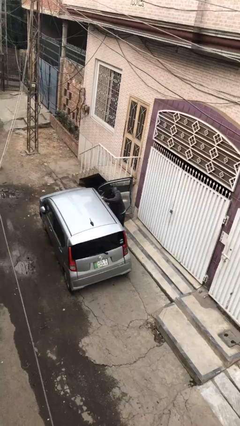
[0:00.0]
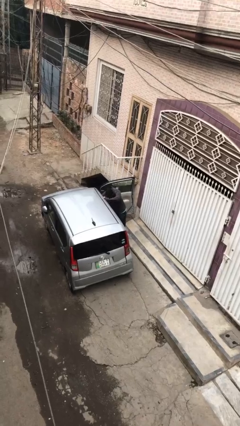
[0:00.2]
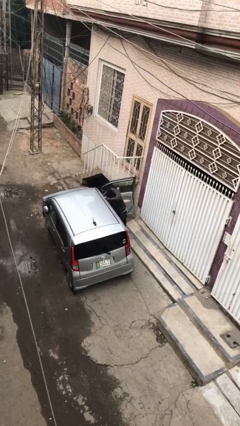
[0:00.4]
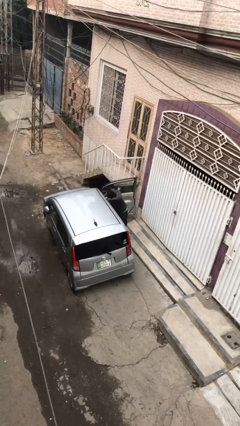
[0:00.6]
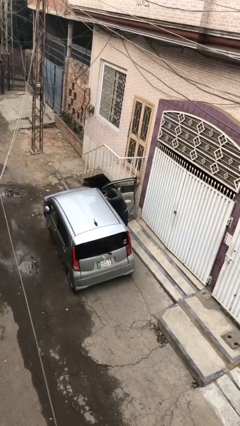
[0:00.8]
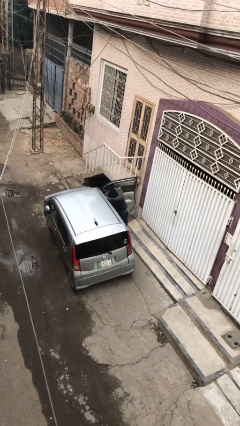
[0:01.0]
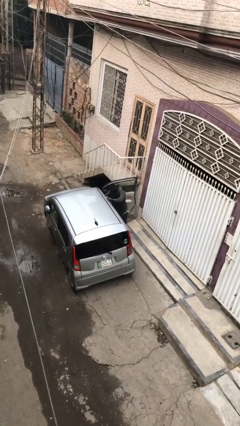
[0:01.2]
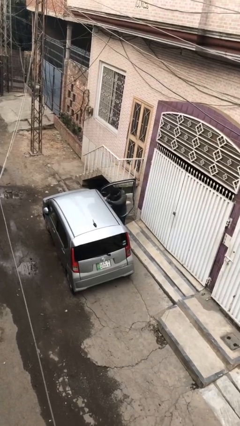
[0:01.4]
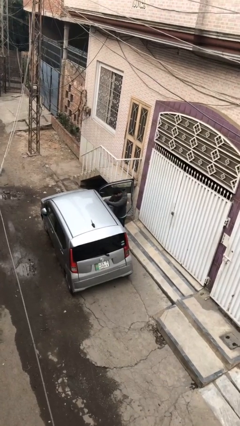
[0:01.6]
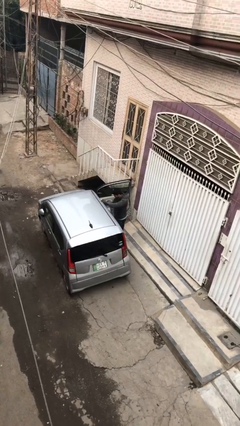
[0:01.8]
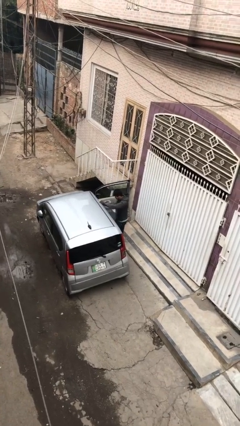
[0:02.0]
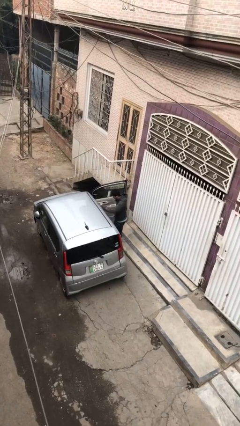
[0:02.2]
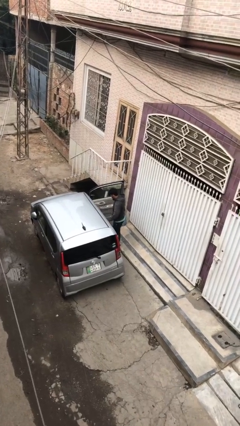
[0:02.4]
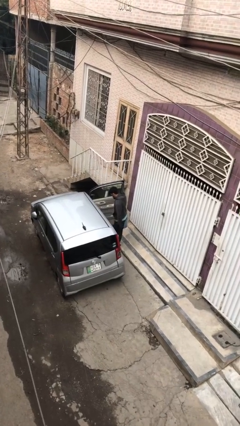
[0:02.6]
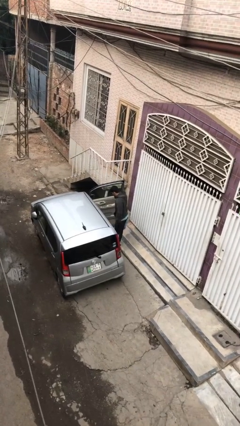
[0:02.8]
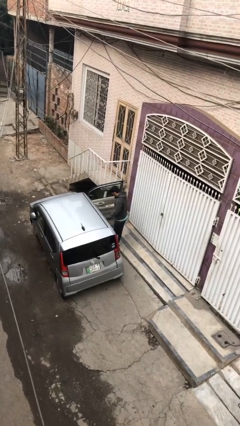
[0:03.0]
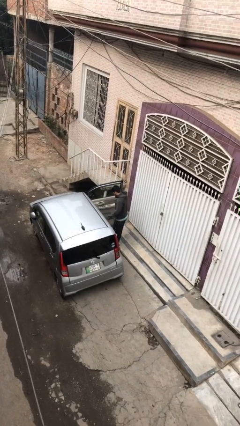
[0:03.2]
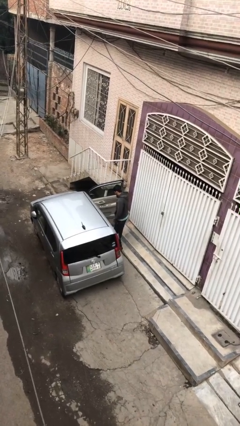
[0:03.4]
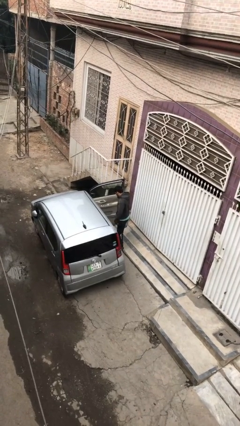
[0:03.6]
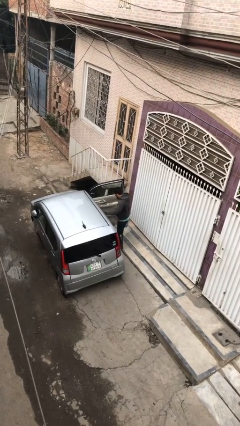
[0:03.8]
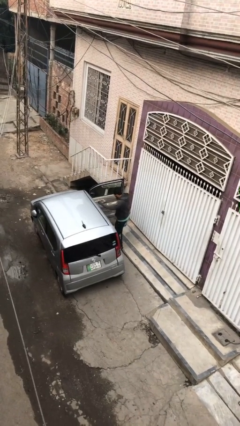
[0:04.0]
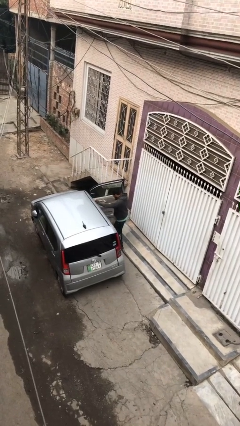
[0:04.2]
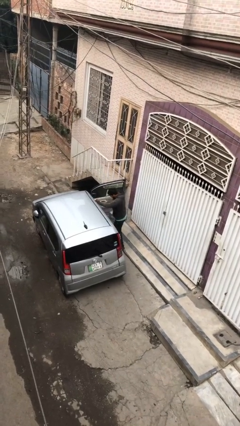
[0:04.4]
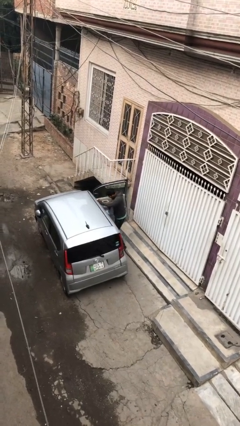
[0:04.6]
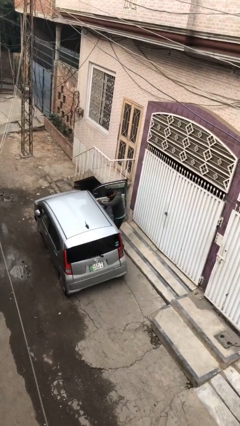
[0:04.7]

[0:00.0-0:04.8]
person unloads car

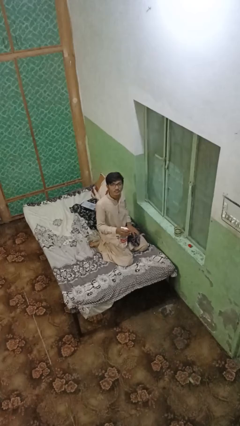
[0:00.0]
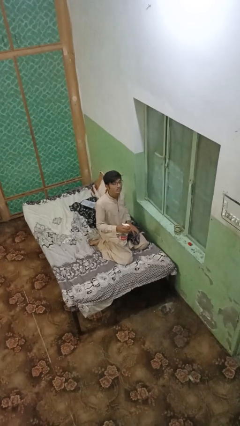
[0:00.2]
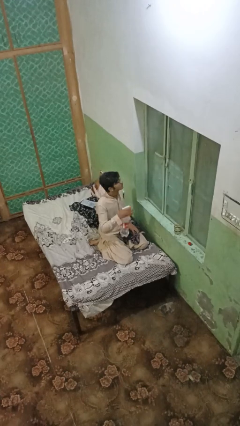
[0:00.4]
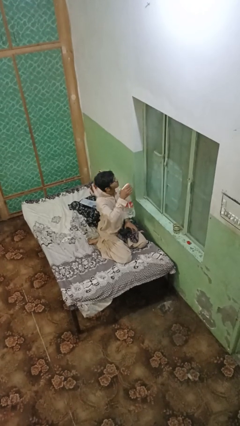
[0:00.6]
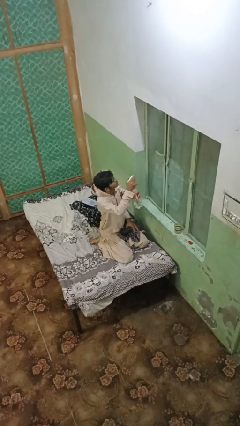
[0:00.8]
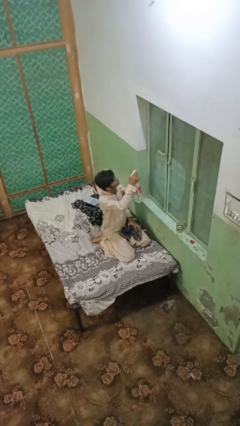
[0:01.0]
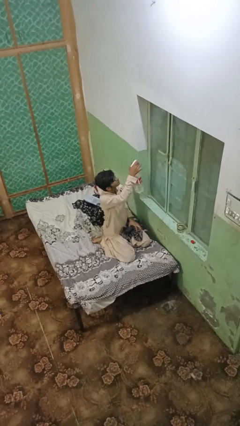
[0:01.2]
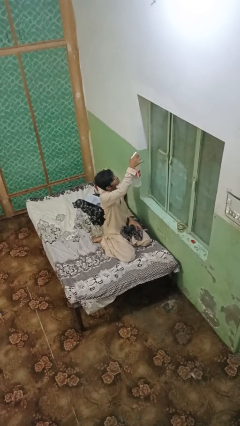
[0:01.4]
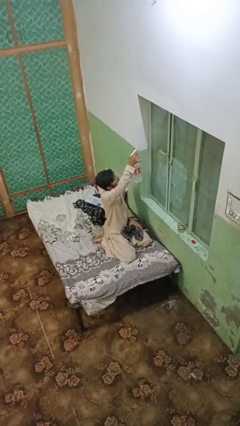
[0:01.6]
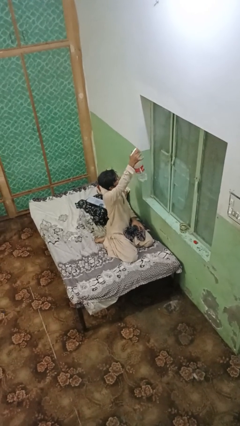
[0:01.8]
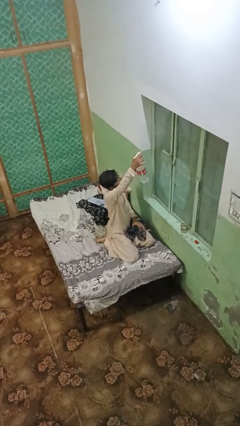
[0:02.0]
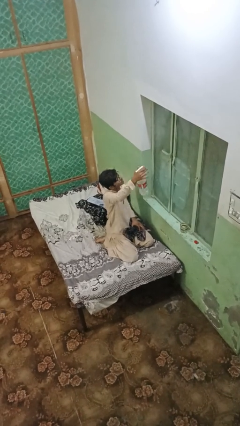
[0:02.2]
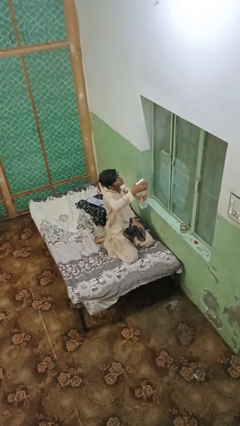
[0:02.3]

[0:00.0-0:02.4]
person sprays from bottle

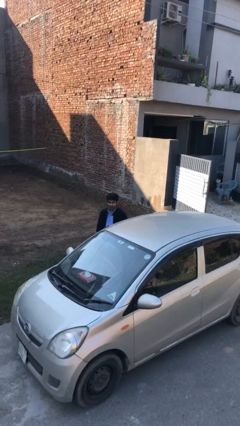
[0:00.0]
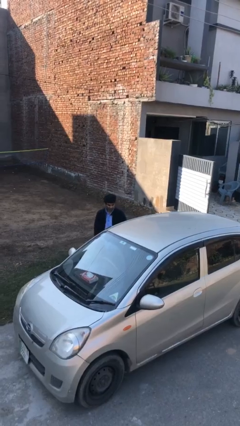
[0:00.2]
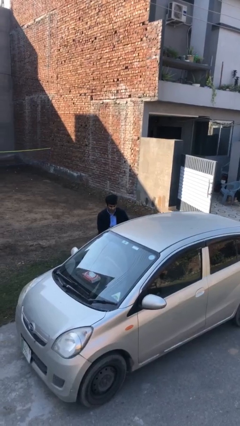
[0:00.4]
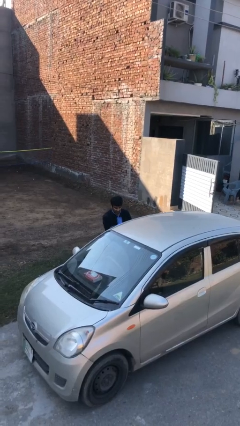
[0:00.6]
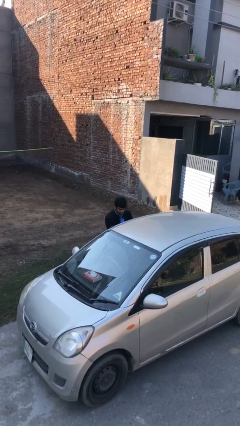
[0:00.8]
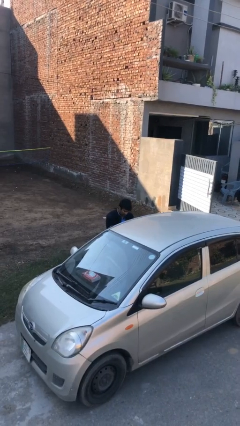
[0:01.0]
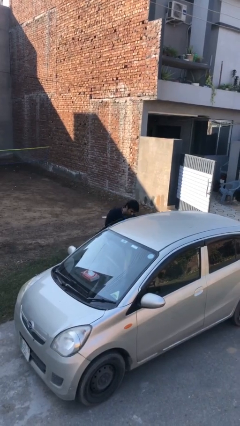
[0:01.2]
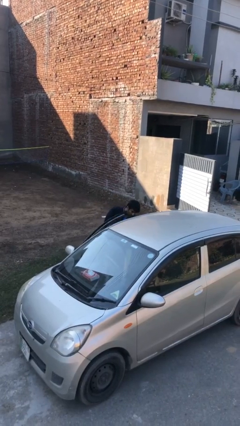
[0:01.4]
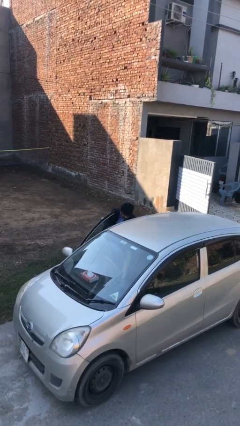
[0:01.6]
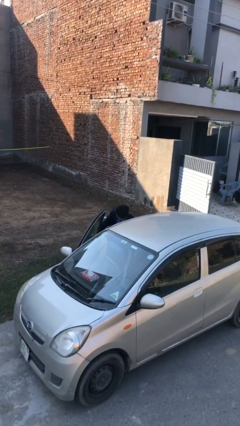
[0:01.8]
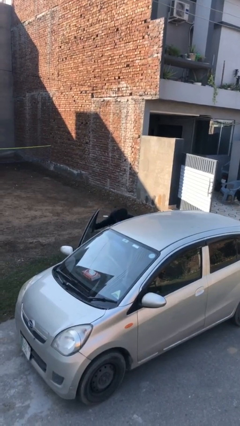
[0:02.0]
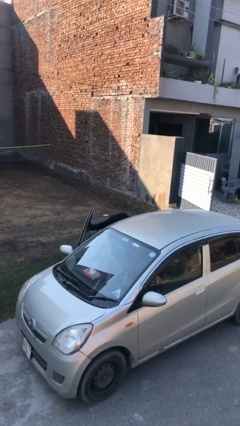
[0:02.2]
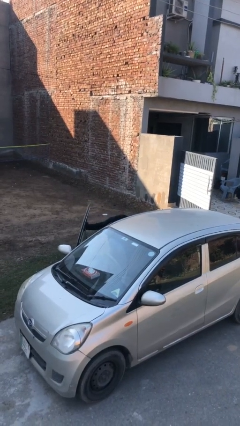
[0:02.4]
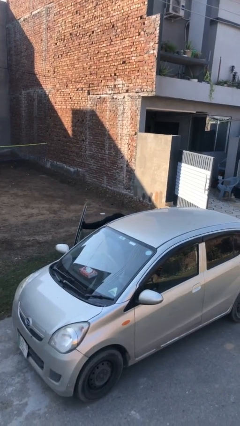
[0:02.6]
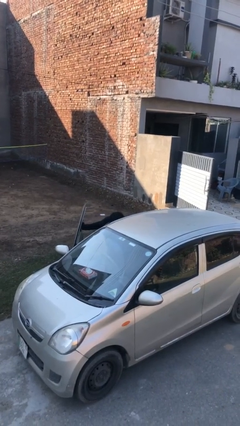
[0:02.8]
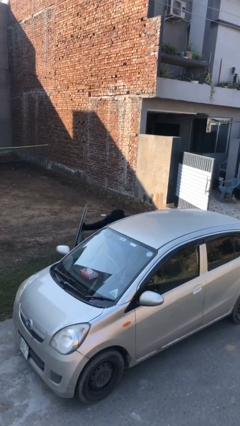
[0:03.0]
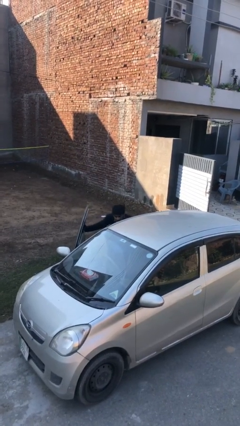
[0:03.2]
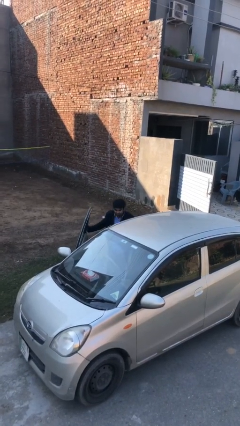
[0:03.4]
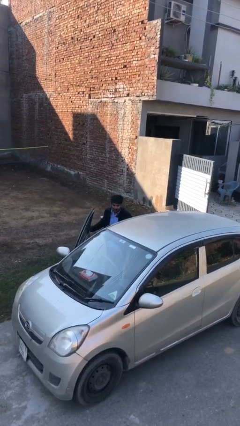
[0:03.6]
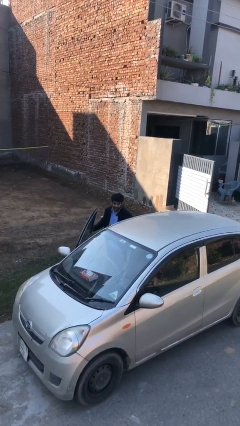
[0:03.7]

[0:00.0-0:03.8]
person opens car door

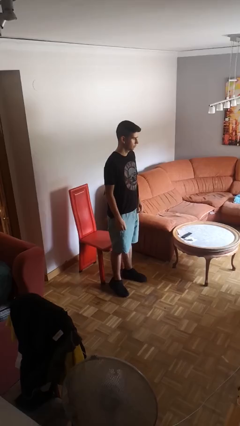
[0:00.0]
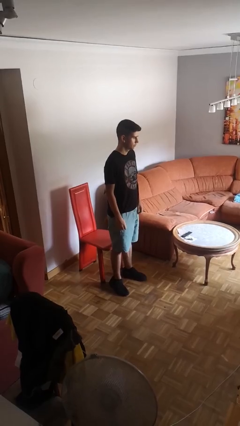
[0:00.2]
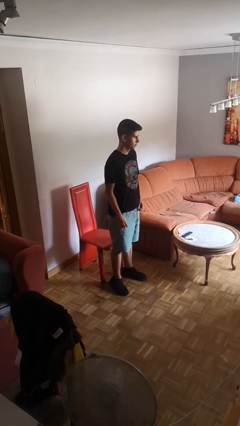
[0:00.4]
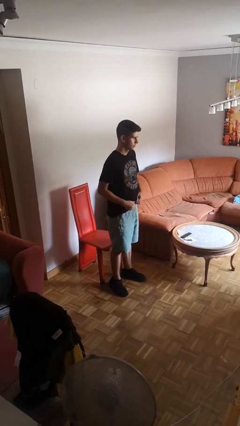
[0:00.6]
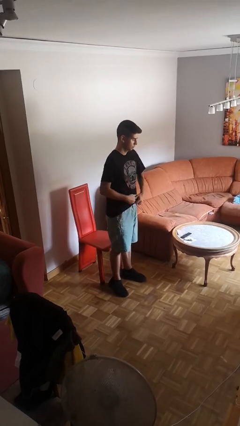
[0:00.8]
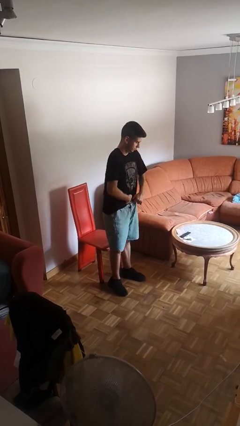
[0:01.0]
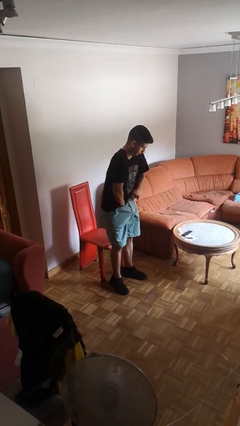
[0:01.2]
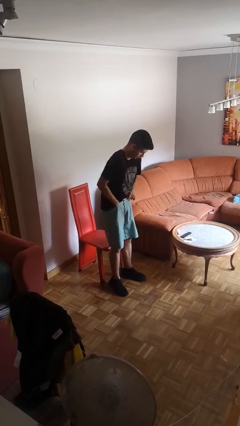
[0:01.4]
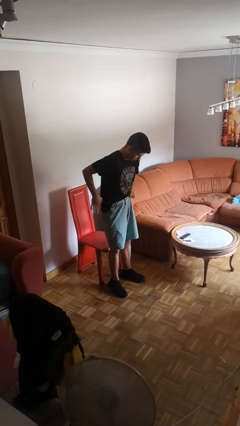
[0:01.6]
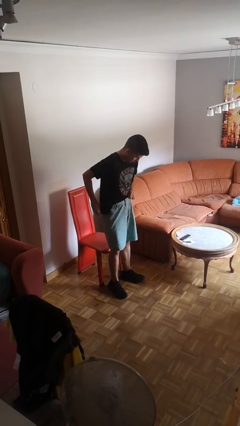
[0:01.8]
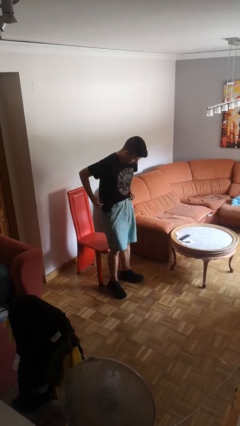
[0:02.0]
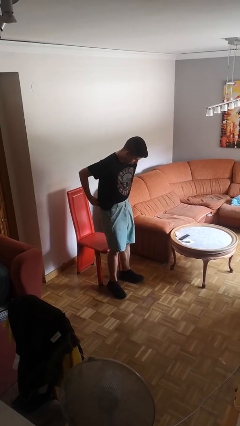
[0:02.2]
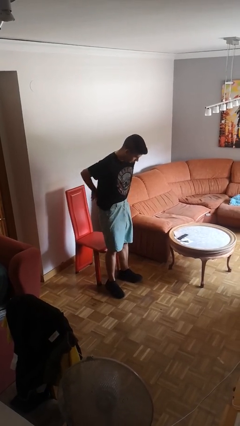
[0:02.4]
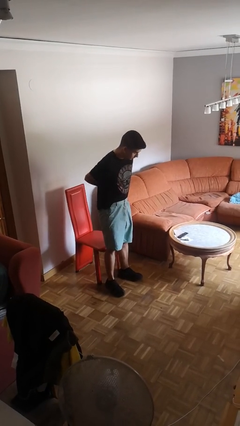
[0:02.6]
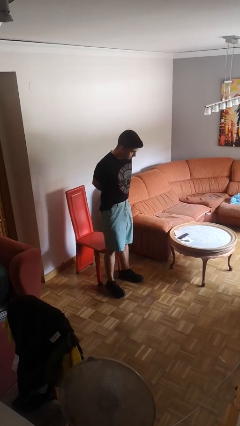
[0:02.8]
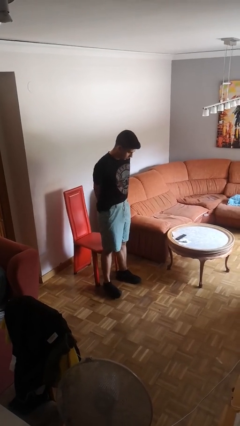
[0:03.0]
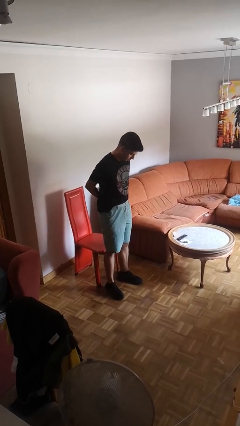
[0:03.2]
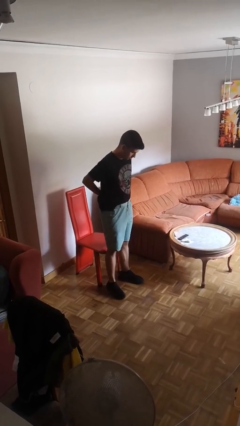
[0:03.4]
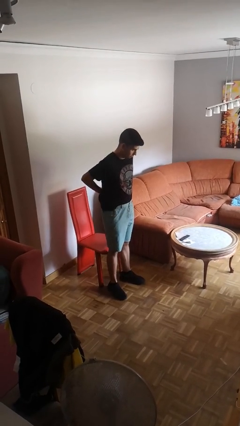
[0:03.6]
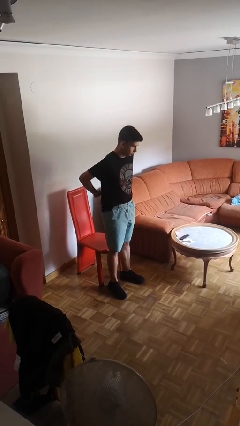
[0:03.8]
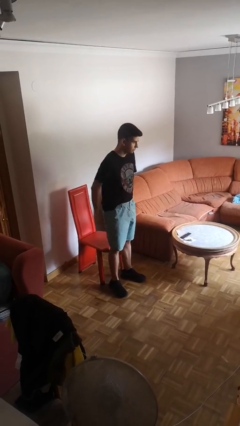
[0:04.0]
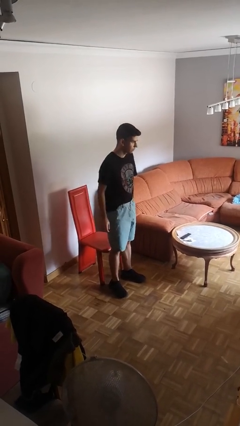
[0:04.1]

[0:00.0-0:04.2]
person tucks in shirt

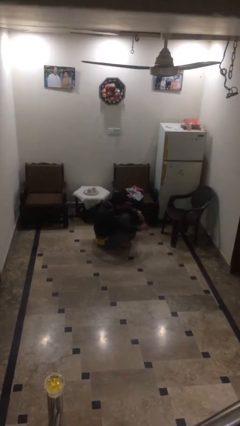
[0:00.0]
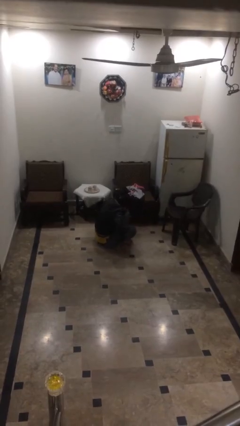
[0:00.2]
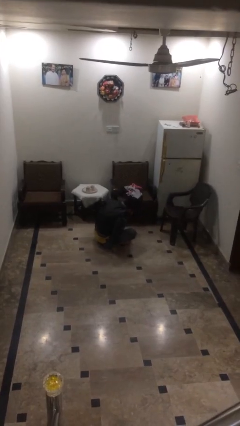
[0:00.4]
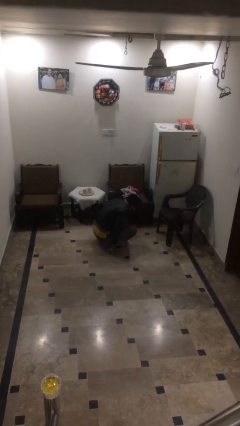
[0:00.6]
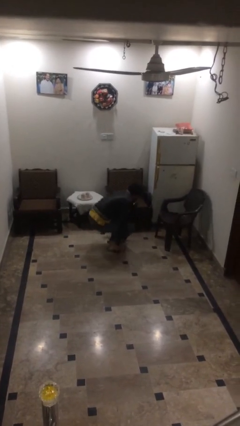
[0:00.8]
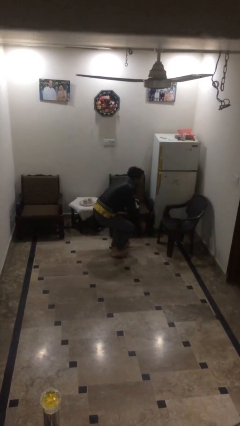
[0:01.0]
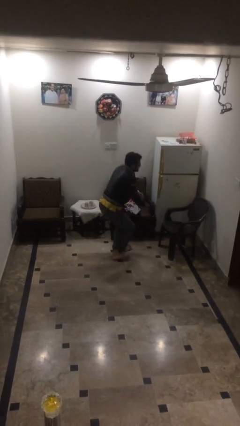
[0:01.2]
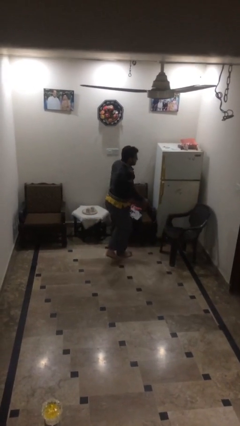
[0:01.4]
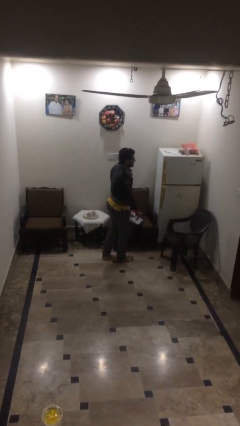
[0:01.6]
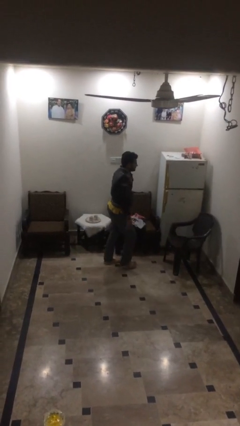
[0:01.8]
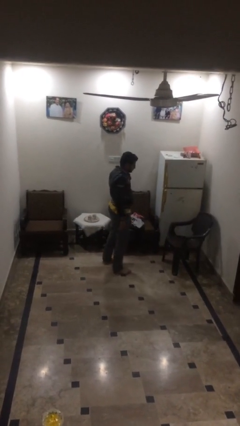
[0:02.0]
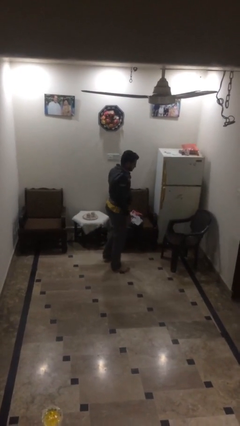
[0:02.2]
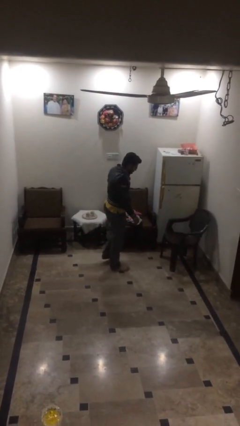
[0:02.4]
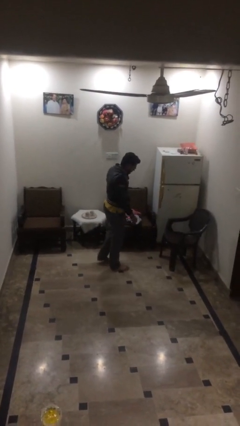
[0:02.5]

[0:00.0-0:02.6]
person stands up
